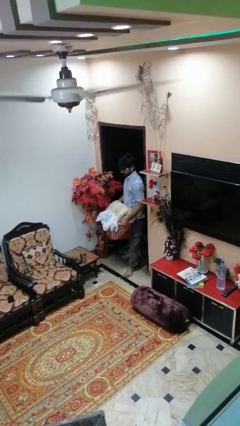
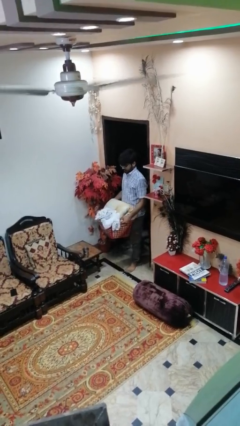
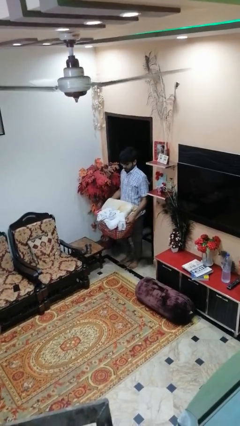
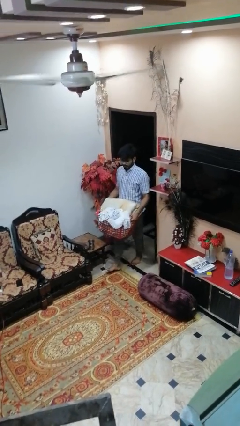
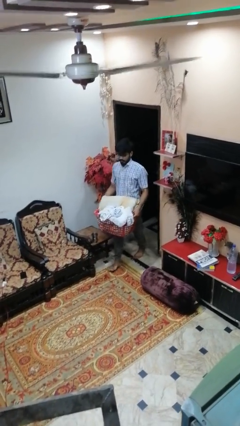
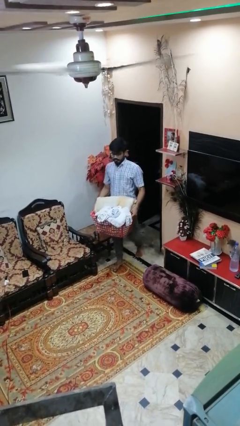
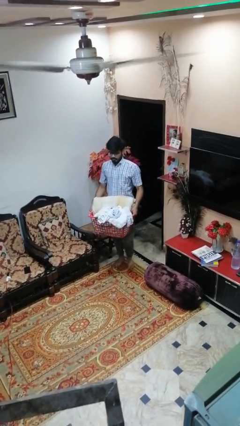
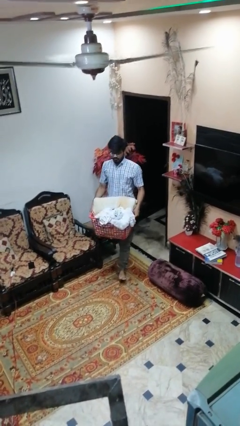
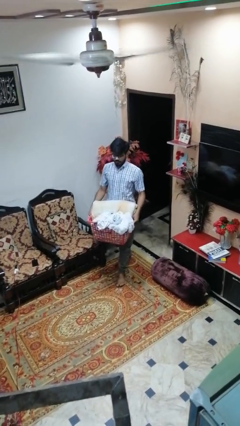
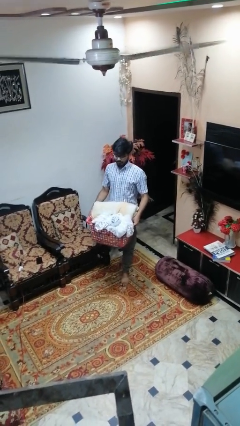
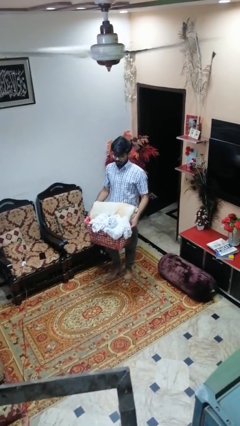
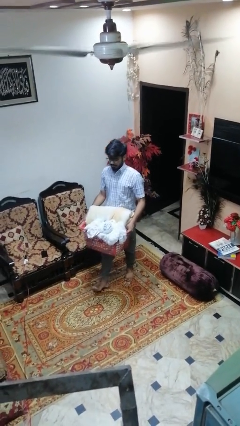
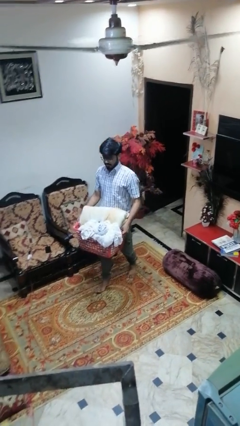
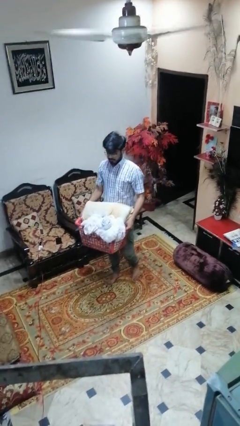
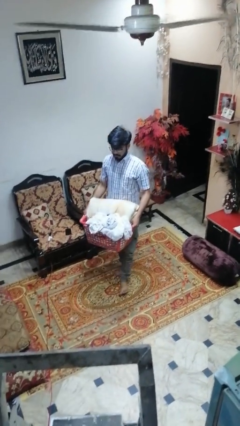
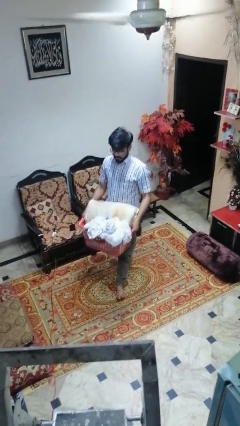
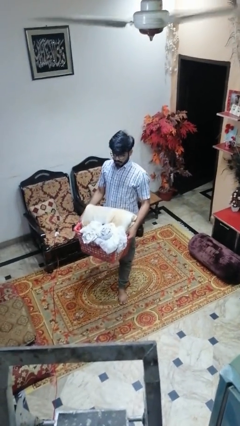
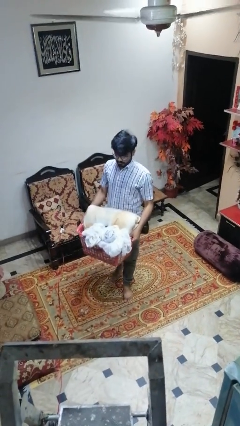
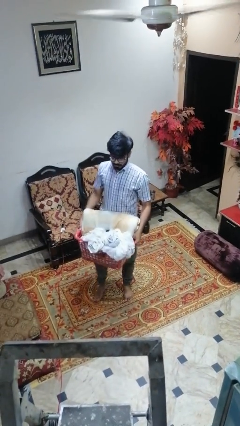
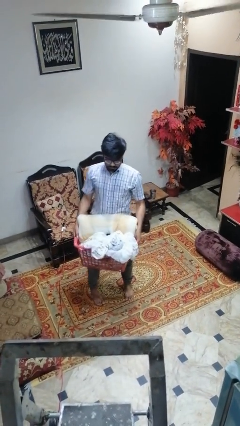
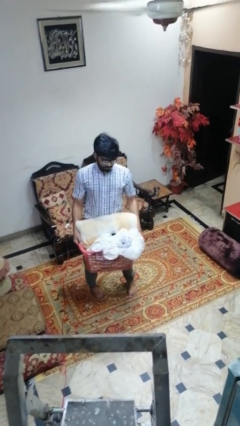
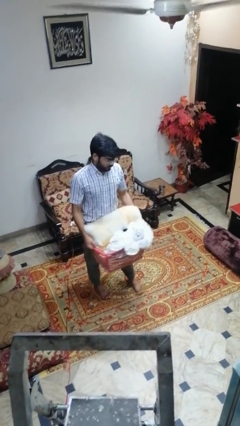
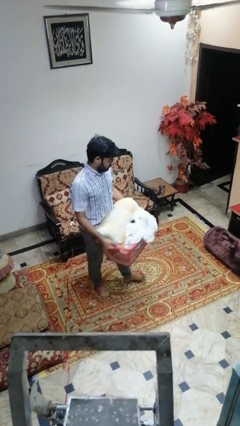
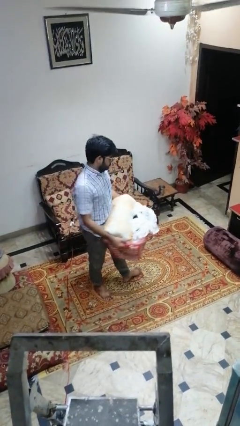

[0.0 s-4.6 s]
person carries laundry basket

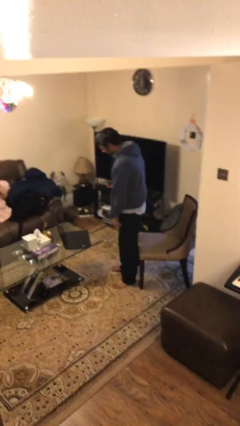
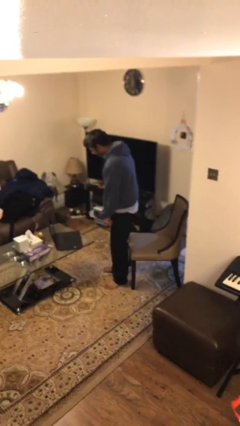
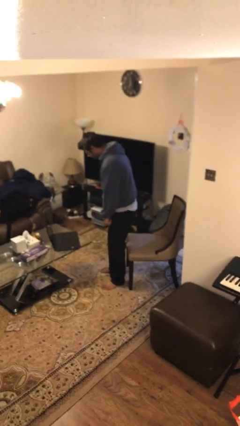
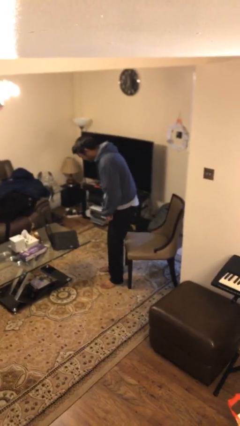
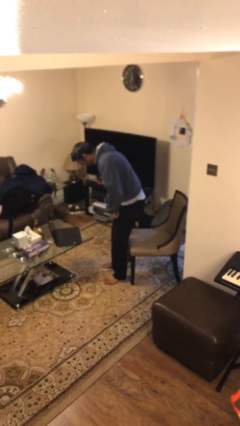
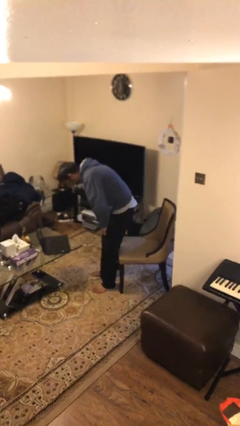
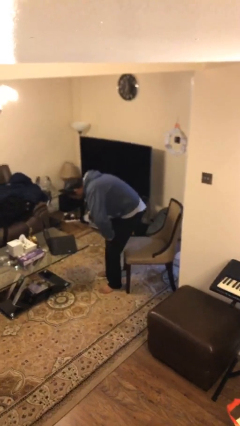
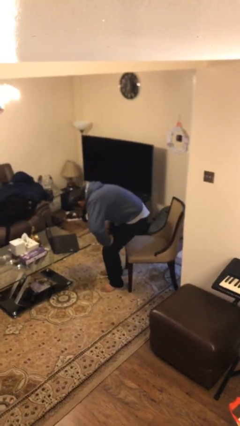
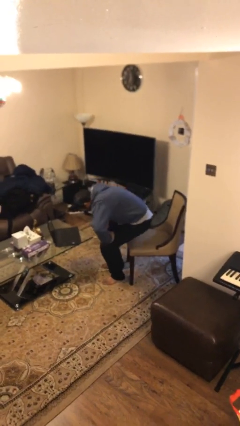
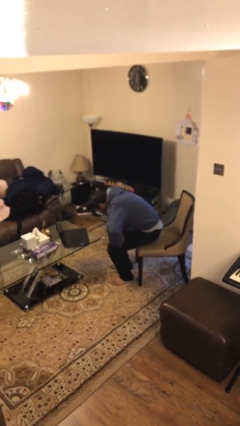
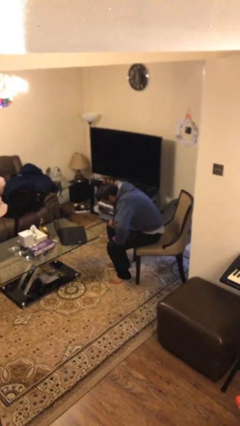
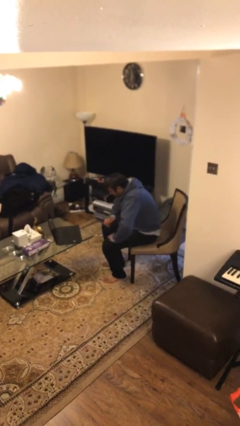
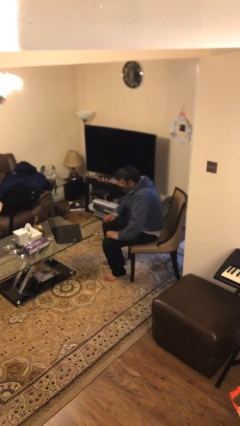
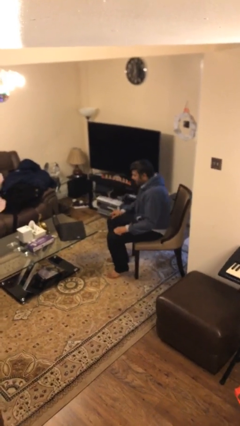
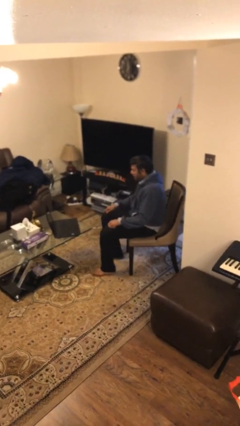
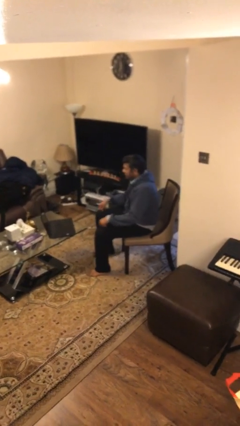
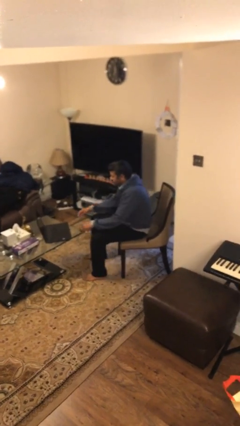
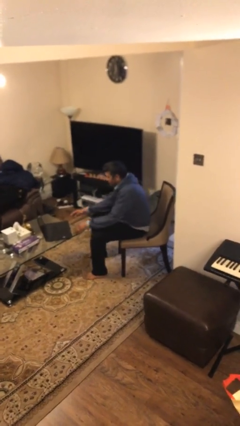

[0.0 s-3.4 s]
person sits down

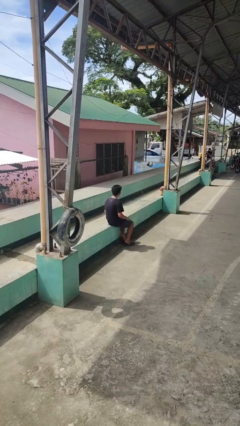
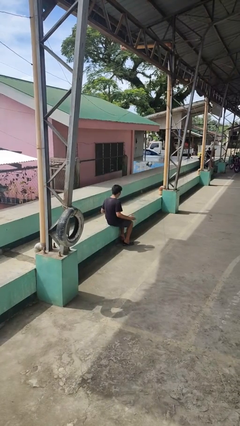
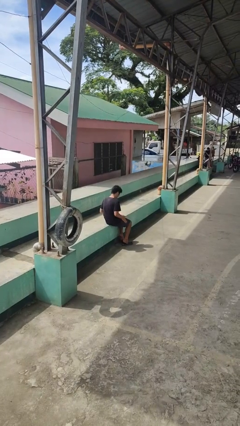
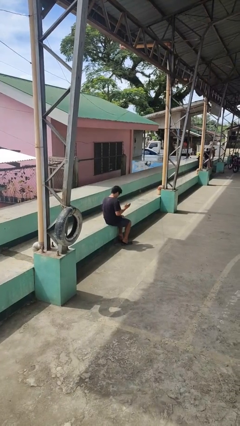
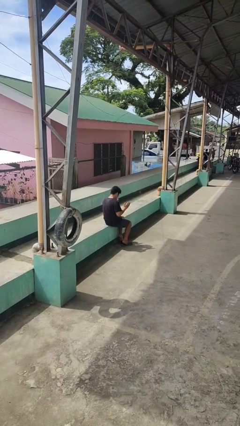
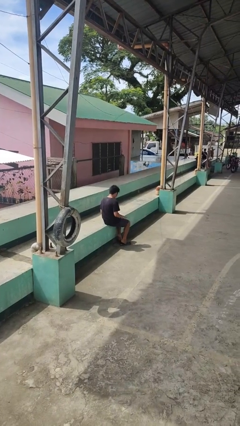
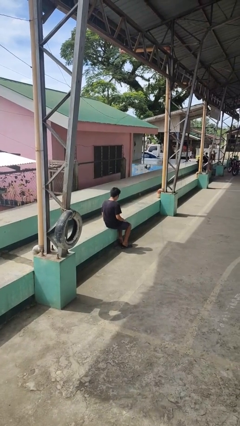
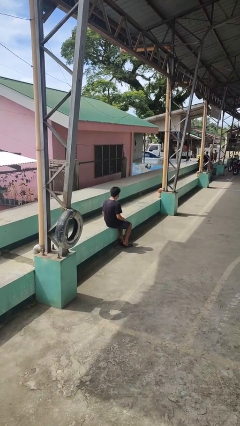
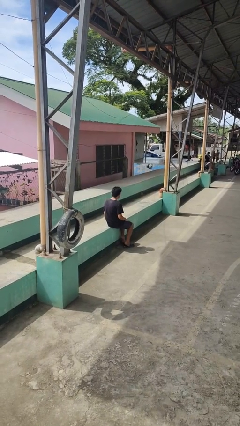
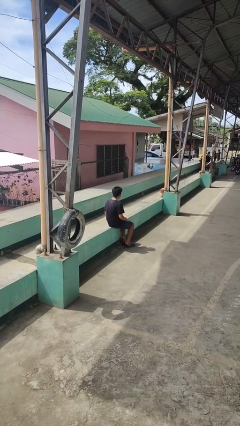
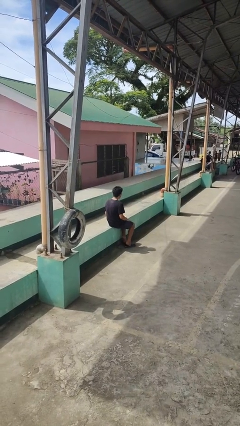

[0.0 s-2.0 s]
person slaps hands on thighs

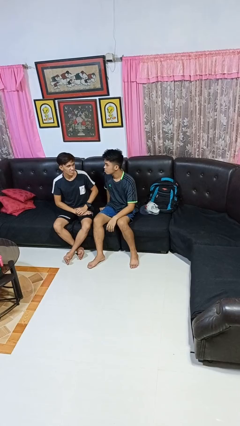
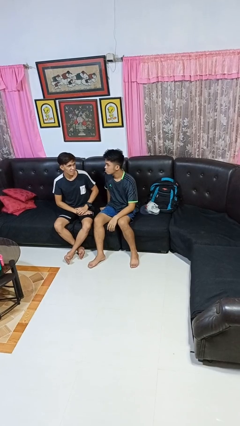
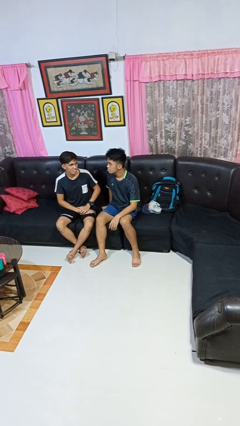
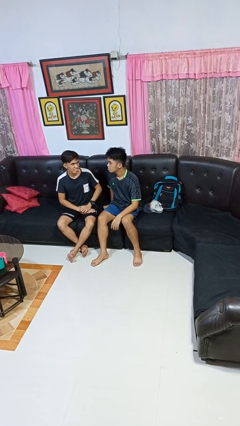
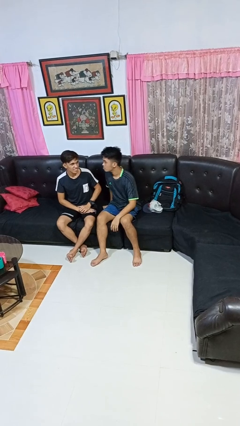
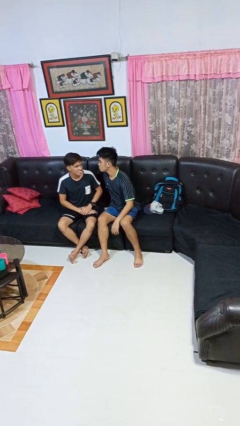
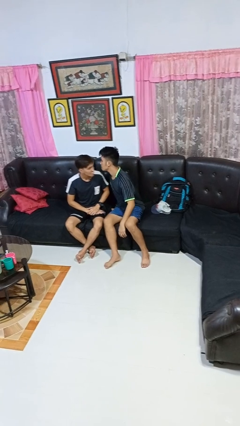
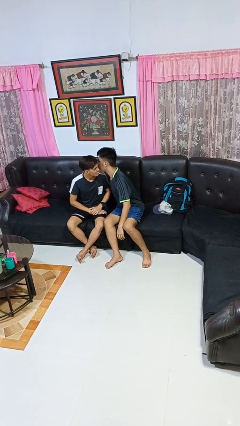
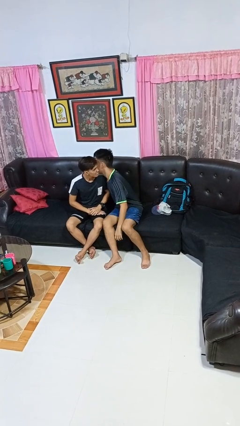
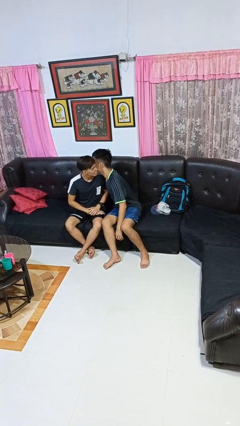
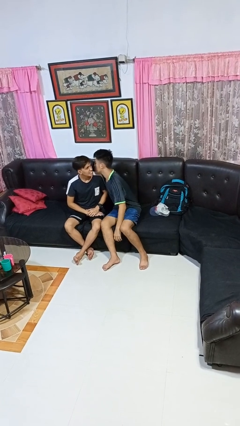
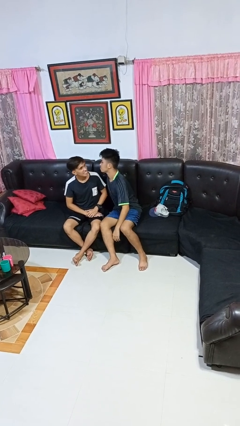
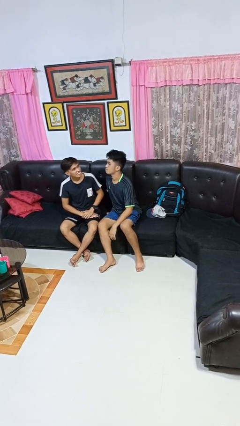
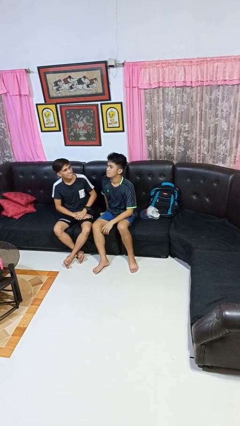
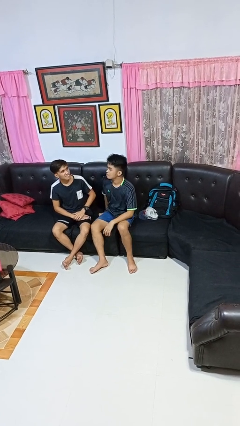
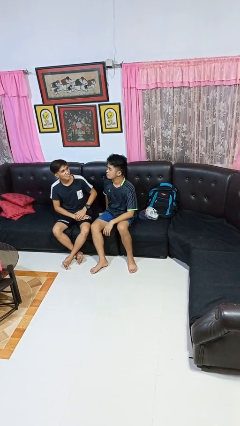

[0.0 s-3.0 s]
person kisses cheek of person

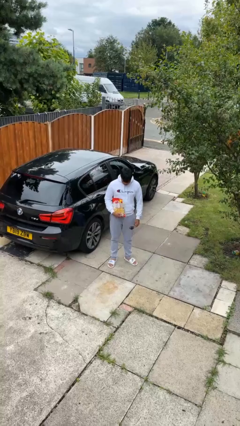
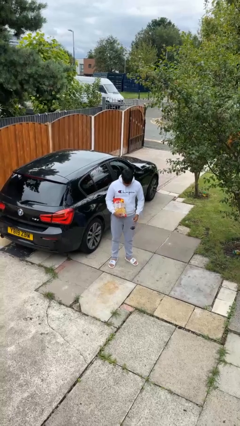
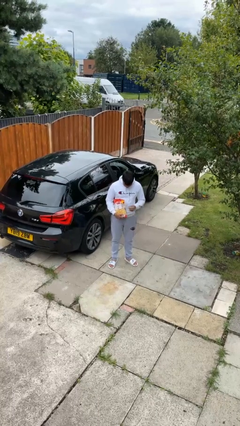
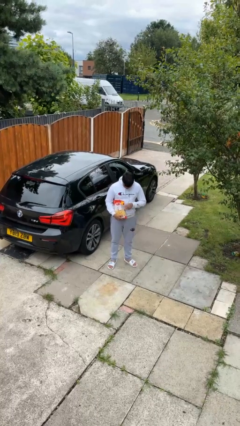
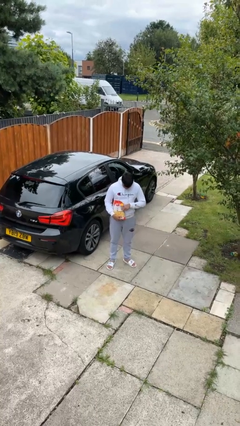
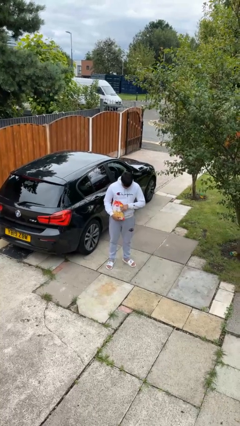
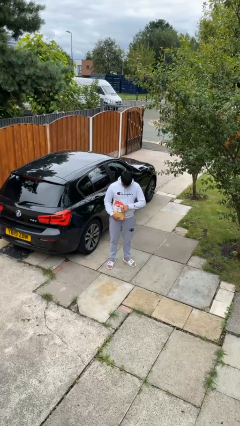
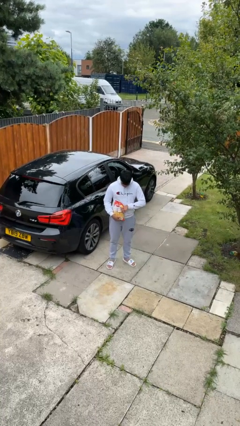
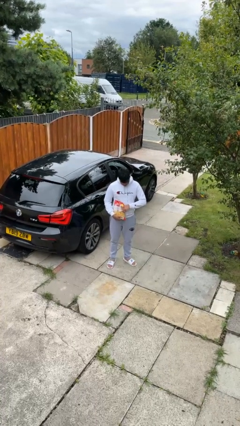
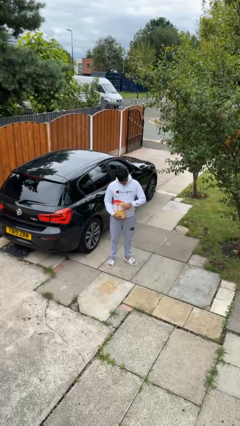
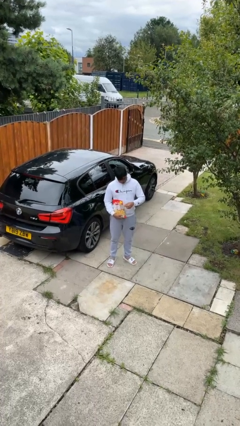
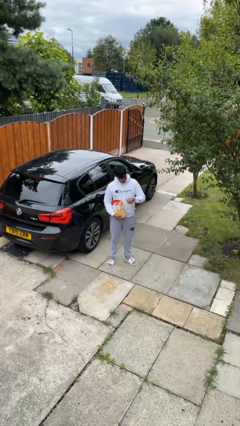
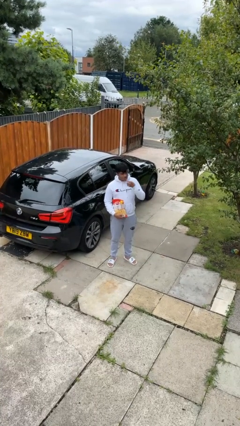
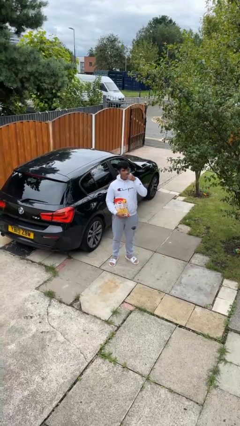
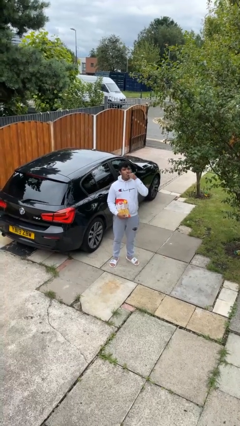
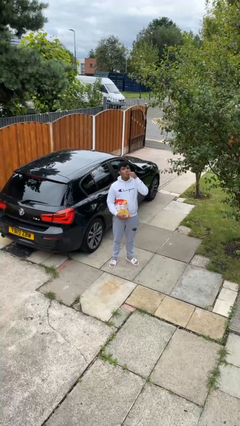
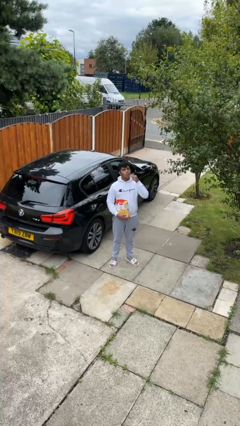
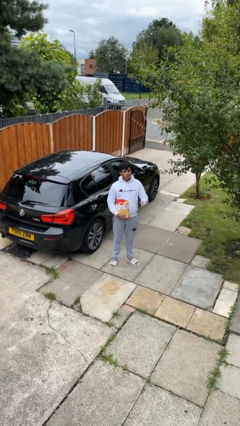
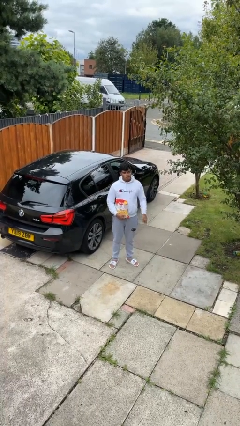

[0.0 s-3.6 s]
person eats snack from bag

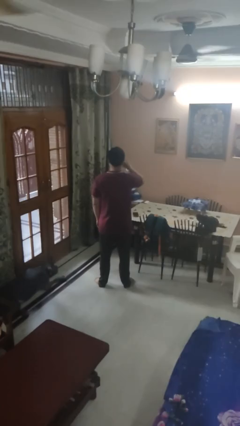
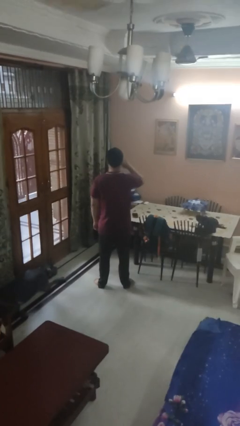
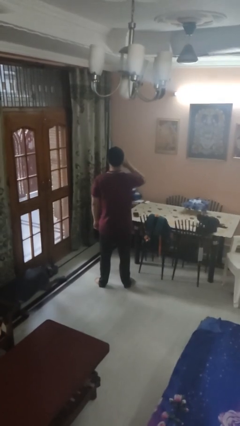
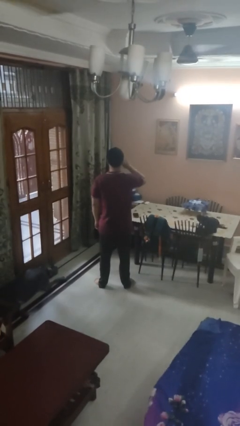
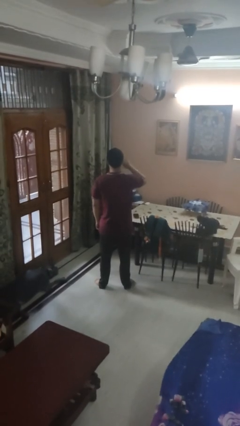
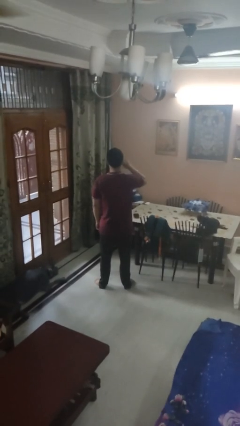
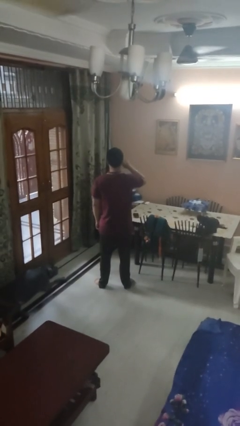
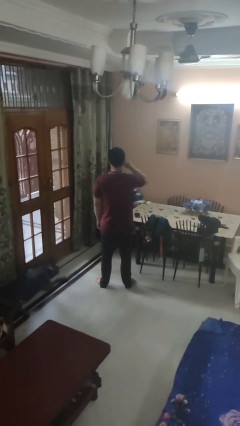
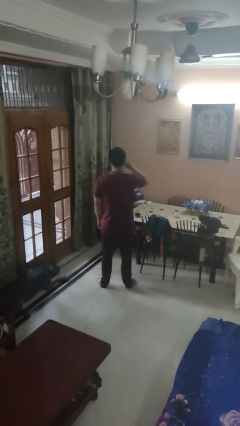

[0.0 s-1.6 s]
person touches earlobe
